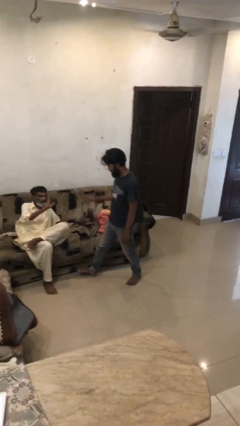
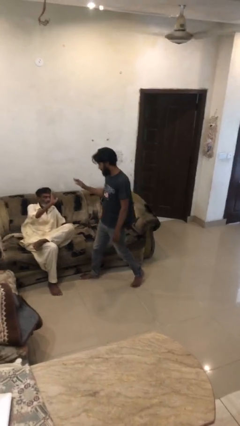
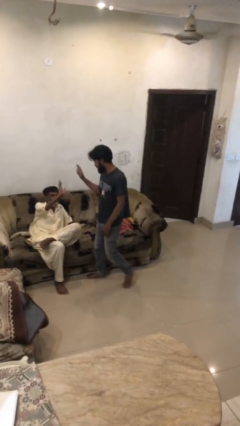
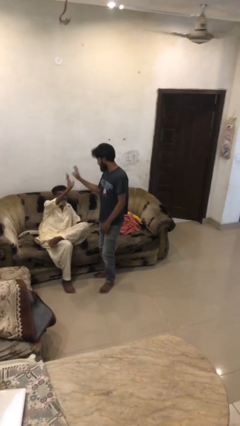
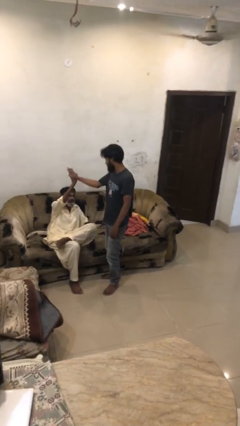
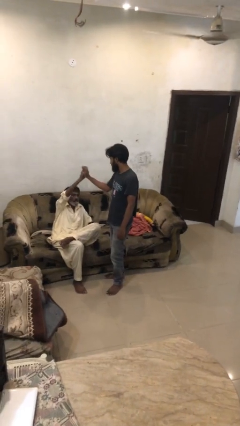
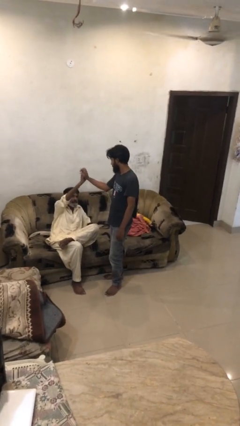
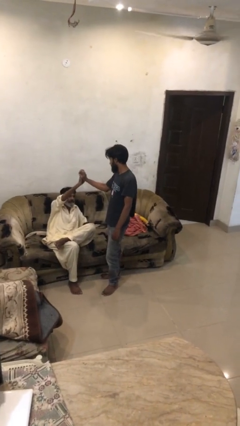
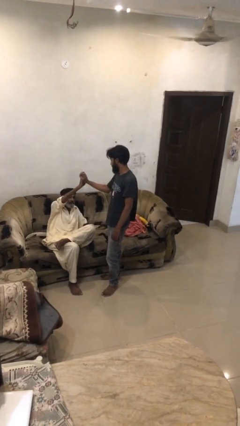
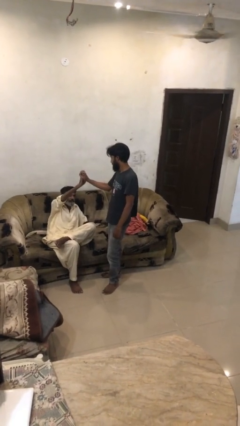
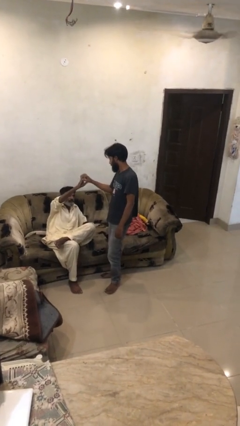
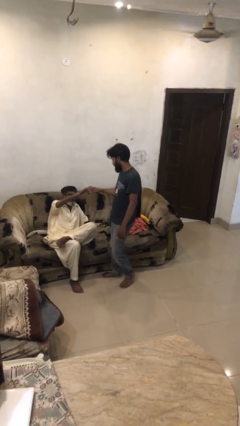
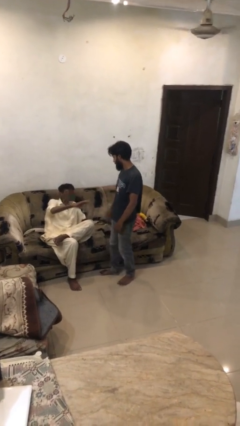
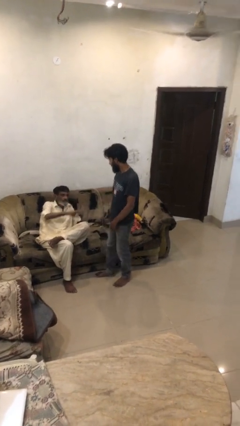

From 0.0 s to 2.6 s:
person highfives hand

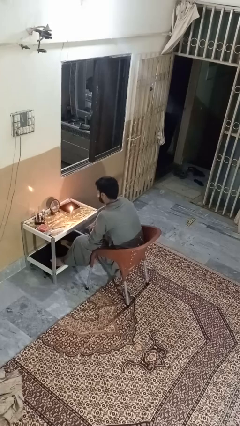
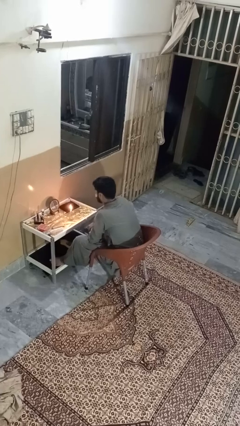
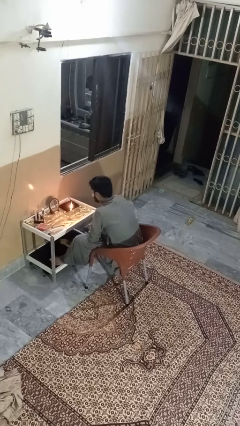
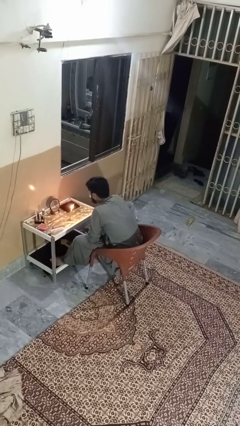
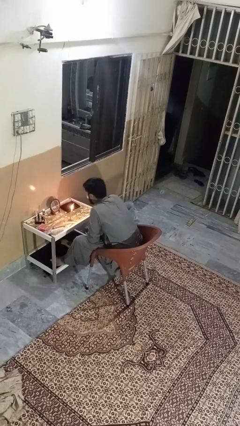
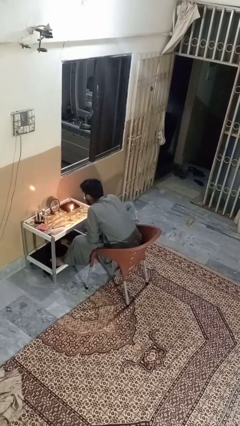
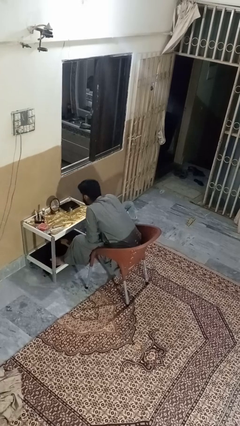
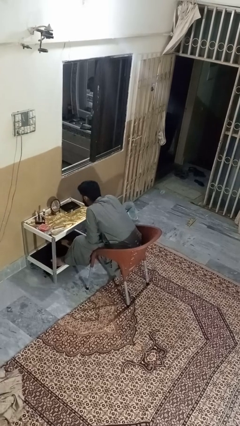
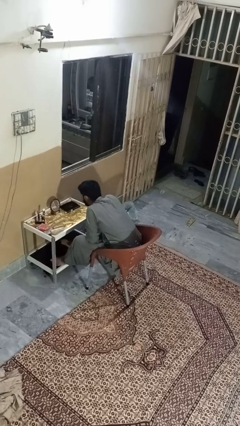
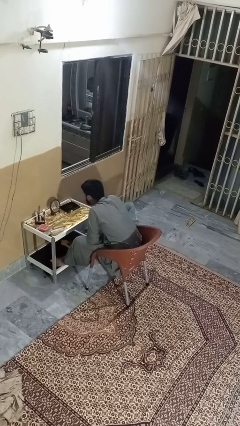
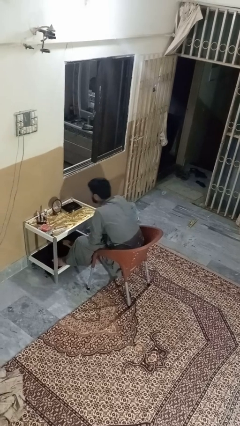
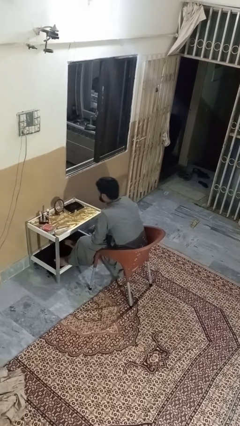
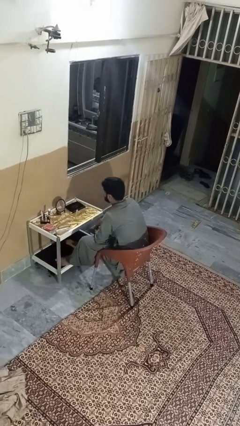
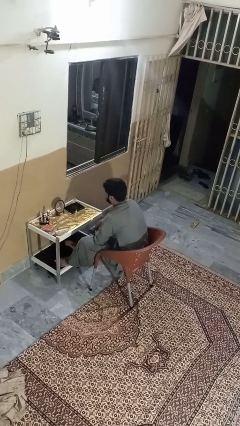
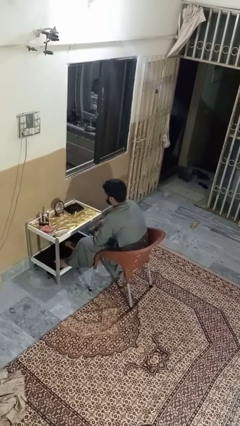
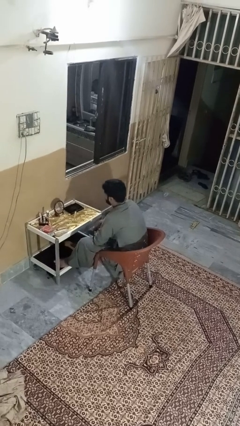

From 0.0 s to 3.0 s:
person extinguishes candle

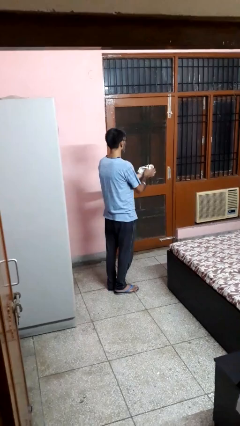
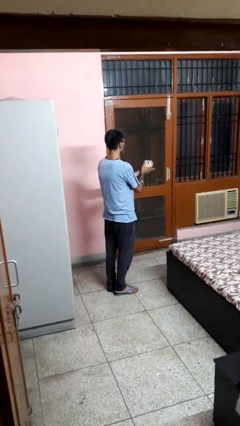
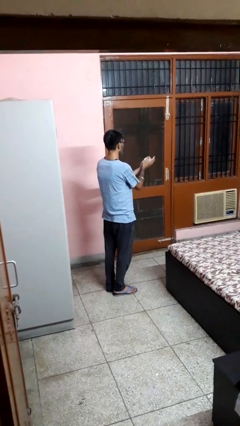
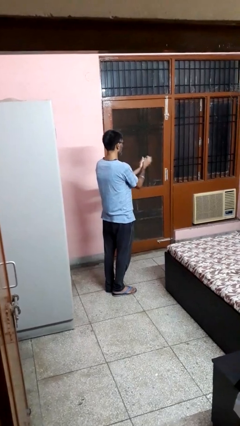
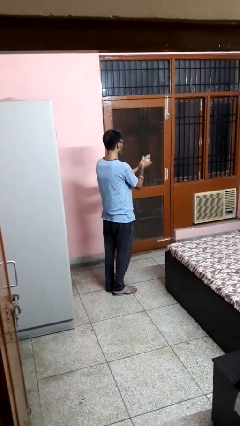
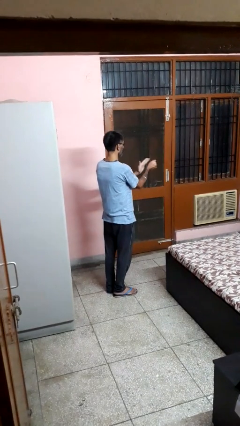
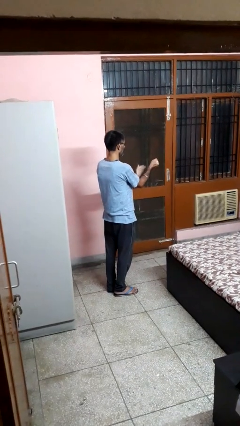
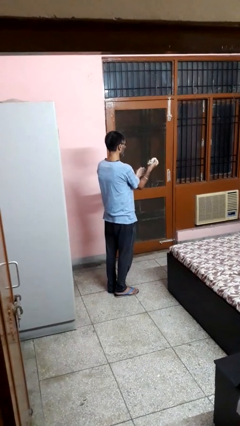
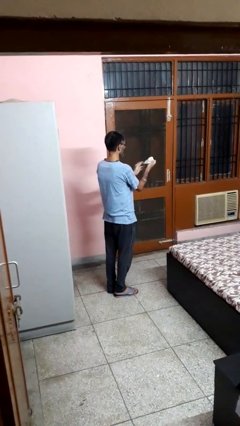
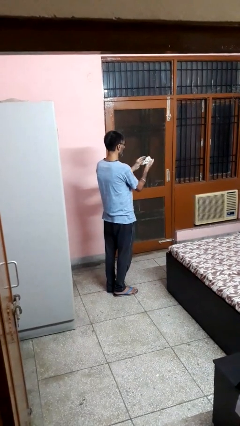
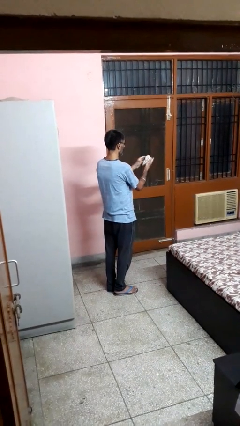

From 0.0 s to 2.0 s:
person crumples paper

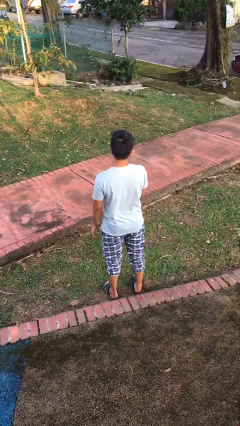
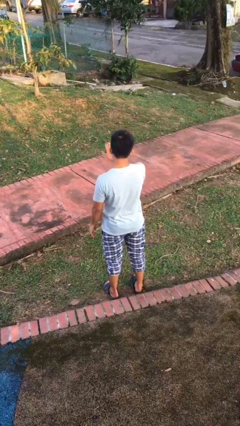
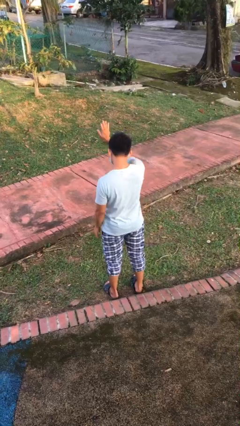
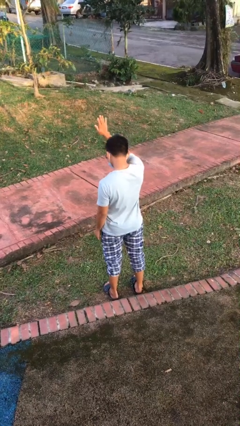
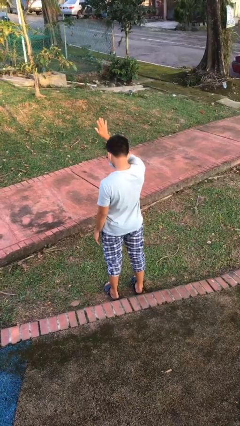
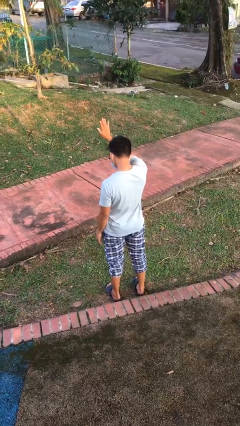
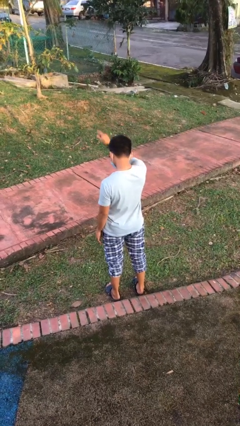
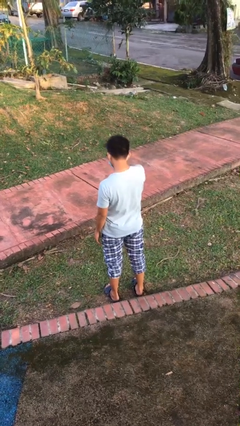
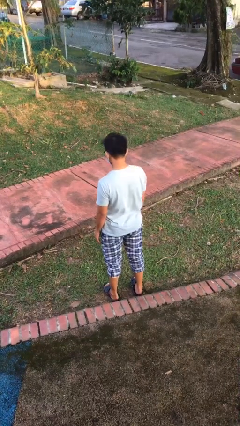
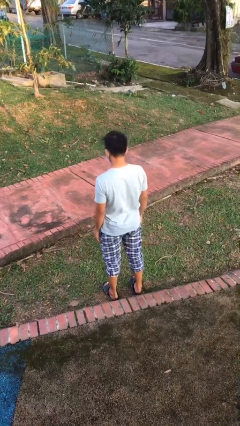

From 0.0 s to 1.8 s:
person gestures stop

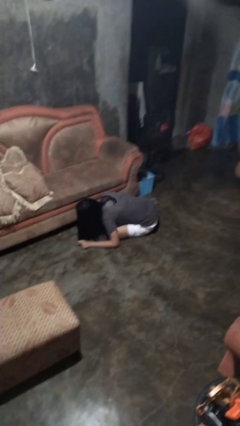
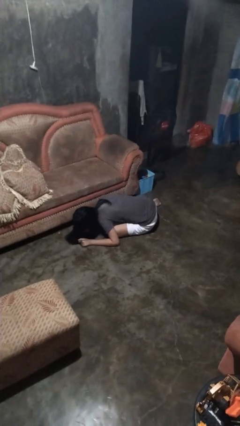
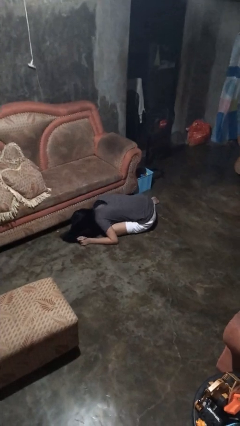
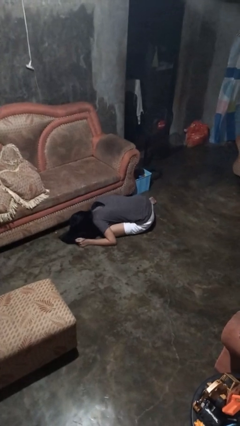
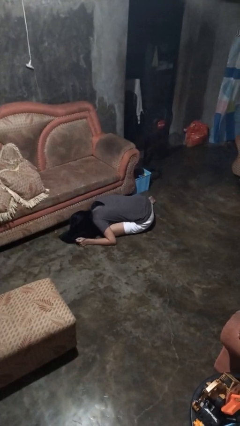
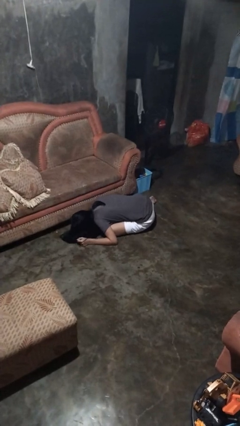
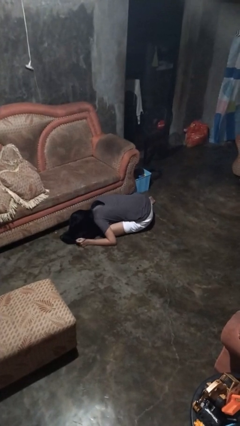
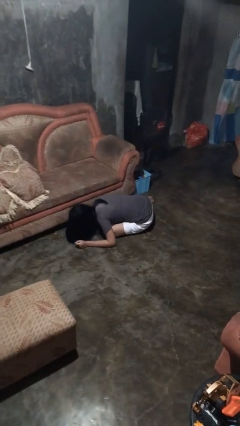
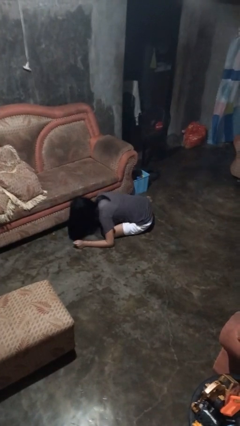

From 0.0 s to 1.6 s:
person searches under couch

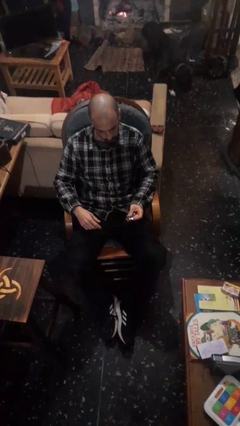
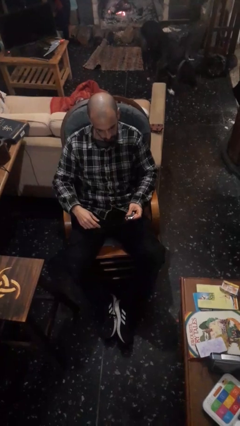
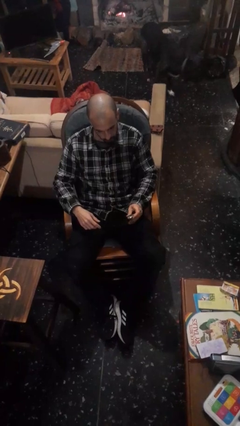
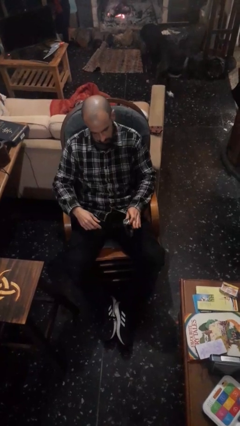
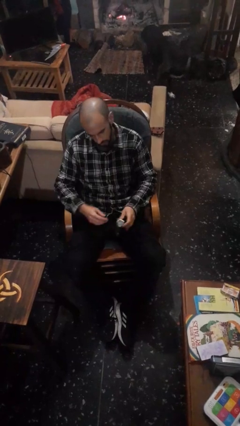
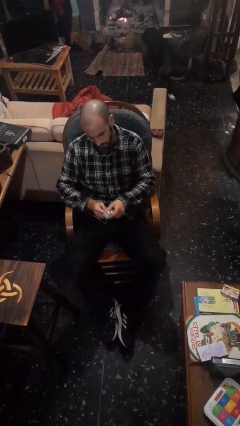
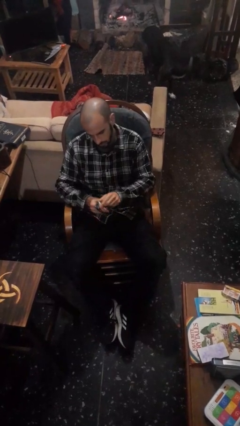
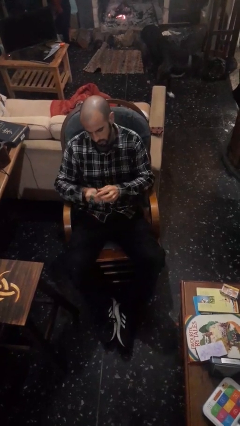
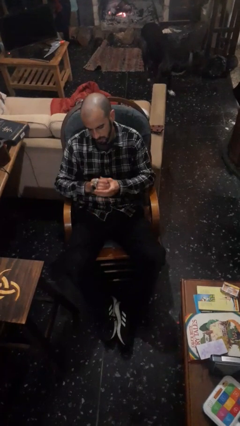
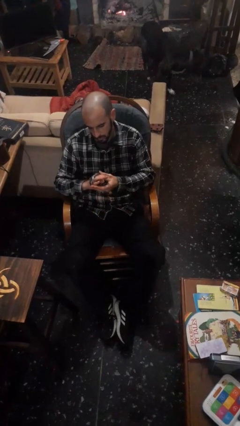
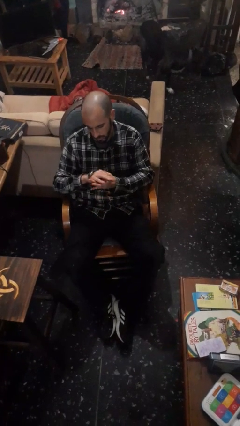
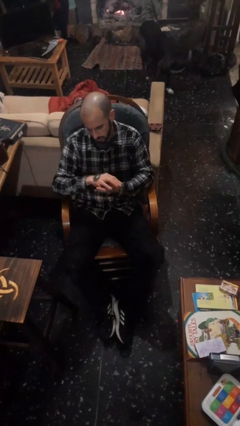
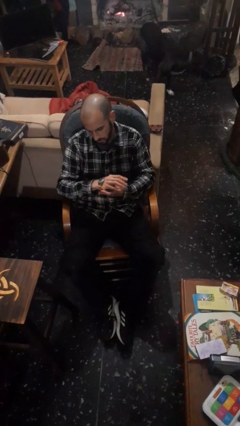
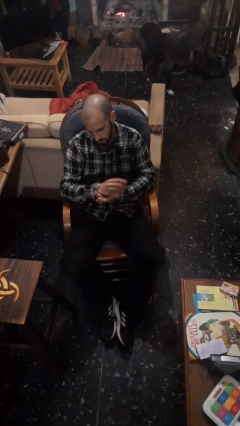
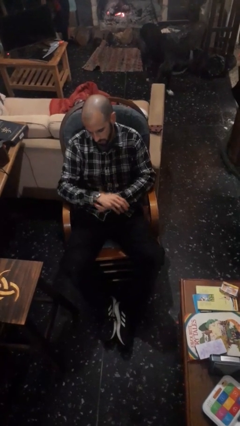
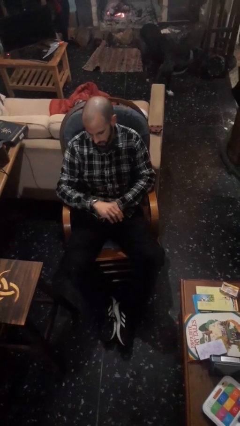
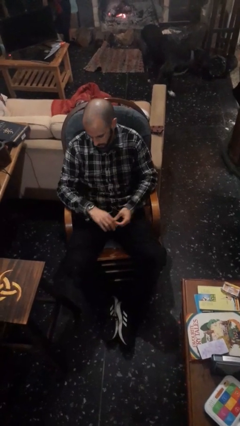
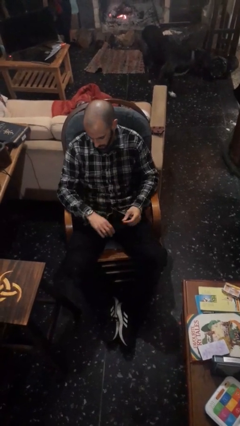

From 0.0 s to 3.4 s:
person puts on wristwatch

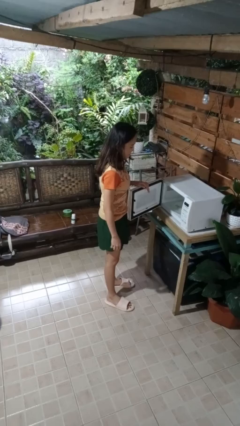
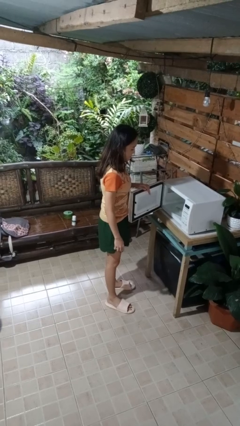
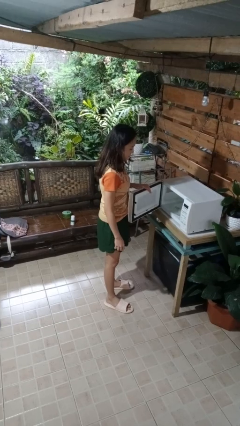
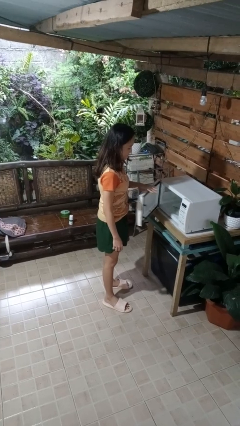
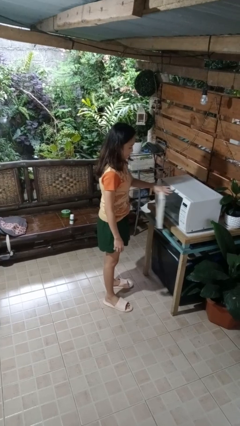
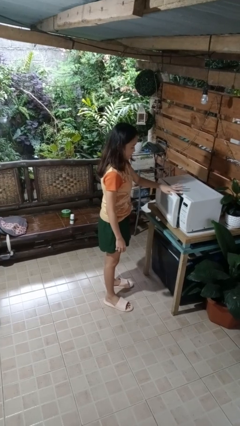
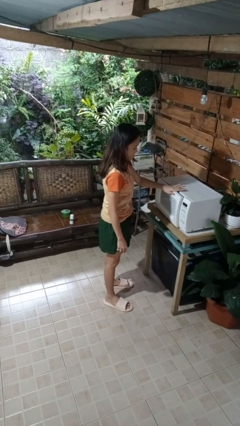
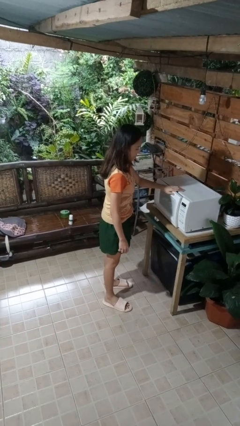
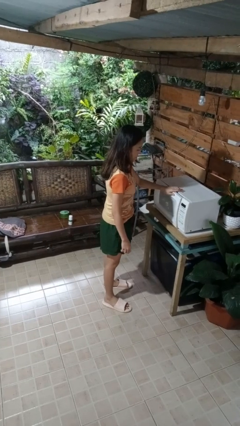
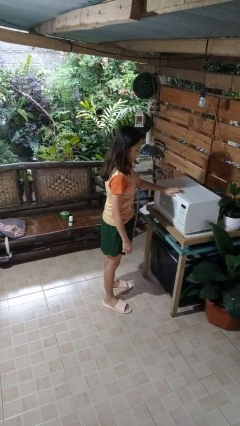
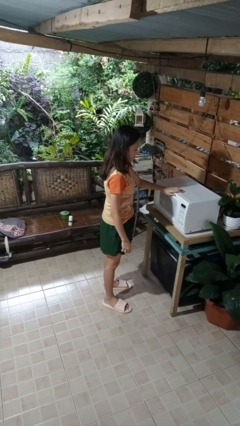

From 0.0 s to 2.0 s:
person closes microwave

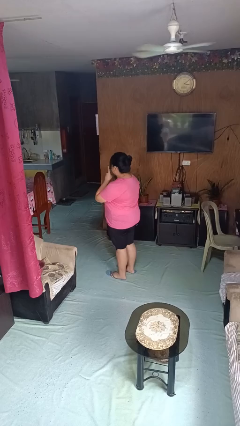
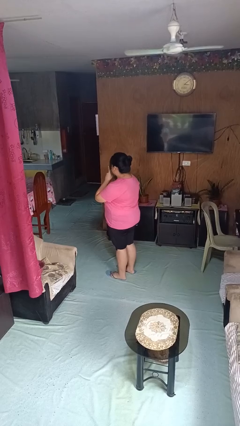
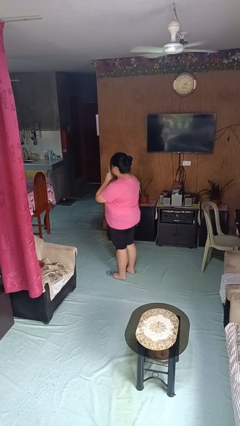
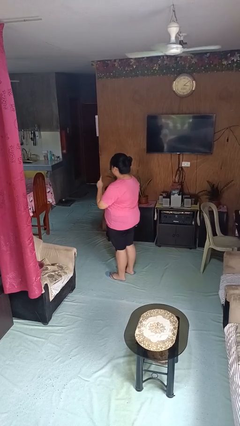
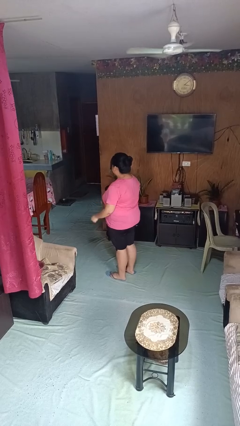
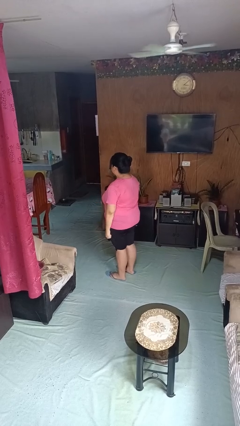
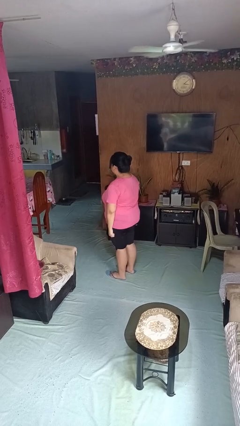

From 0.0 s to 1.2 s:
person gestures be quiet
